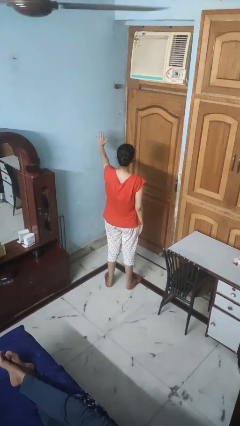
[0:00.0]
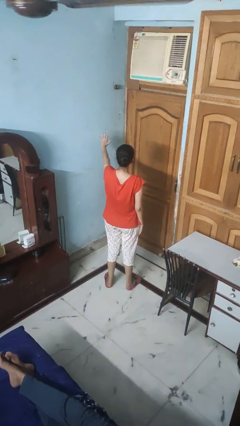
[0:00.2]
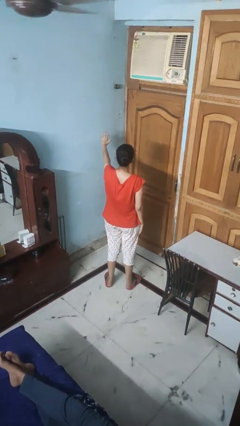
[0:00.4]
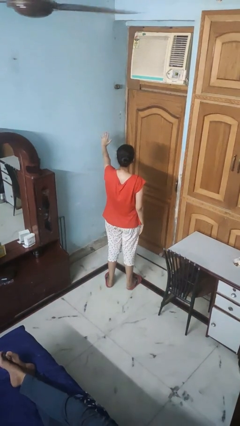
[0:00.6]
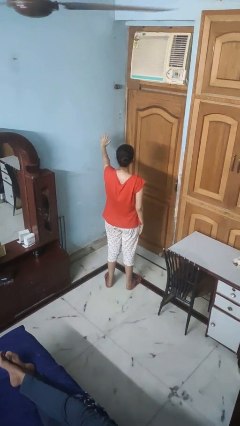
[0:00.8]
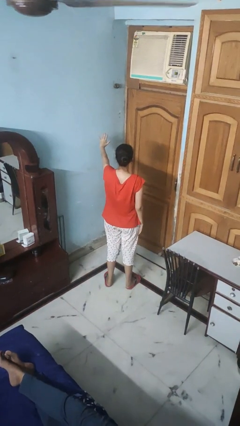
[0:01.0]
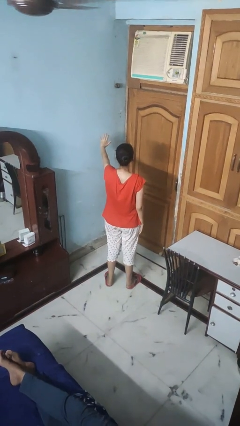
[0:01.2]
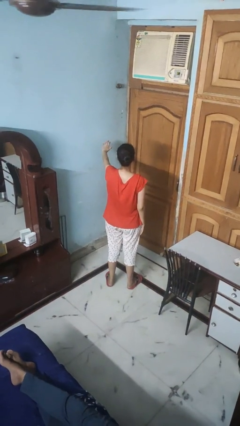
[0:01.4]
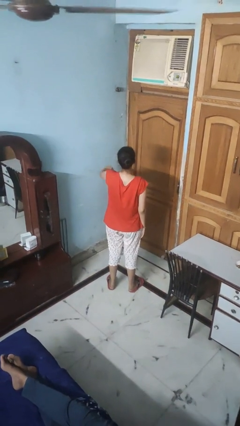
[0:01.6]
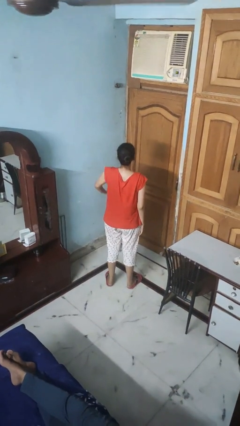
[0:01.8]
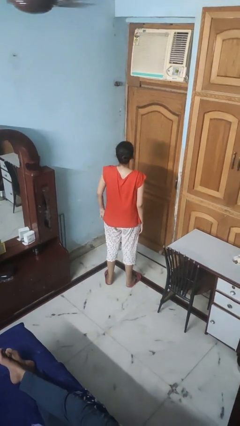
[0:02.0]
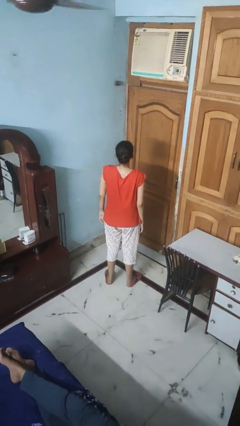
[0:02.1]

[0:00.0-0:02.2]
person gestures number five

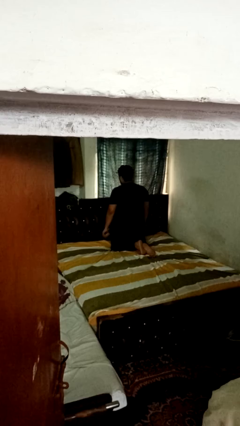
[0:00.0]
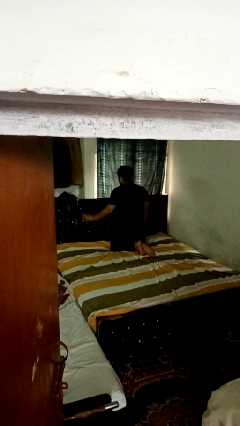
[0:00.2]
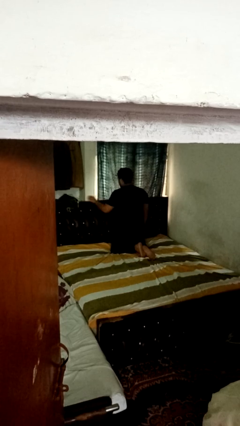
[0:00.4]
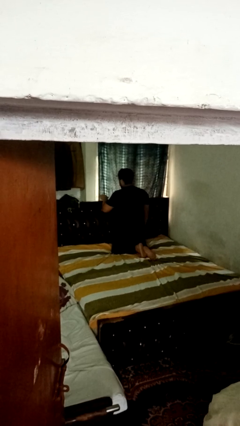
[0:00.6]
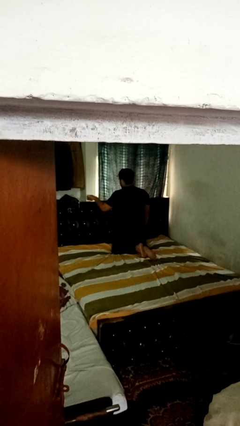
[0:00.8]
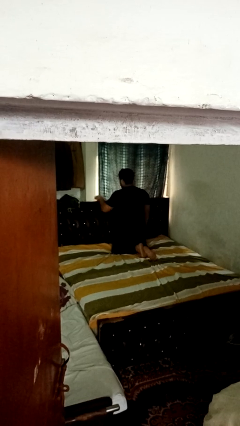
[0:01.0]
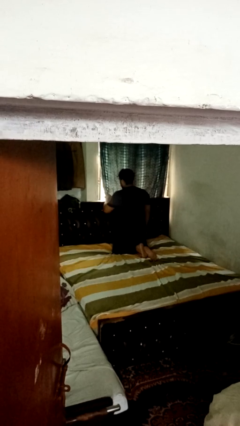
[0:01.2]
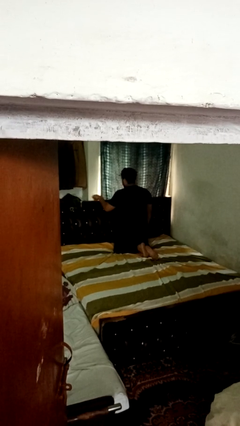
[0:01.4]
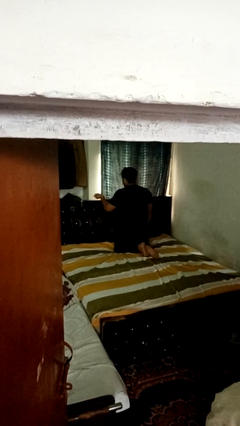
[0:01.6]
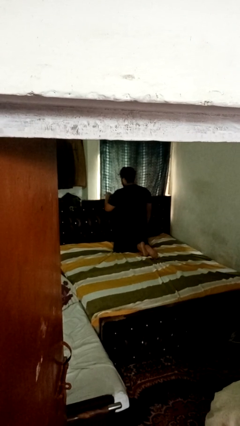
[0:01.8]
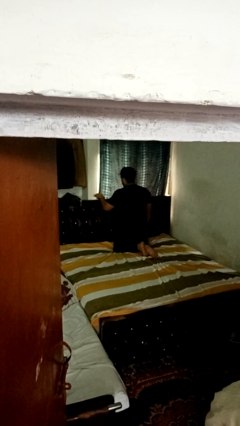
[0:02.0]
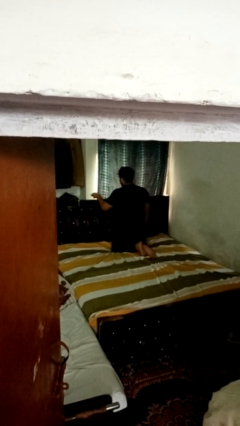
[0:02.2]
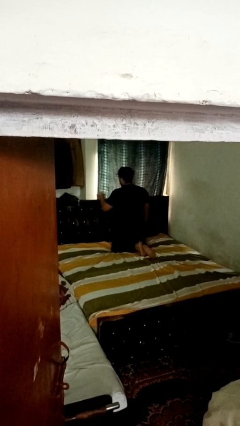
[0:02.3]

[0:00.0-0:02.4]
person dusts furniture

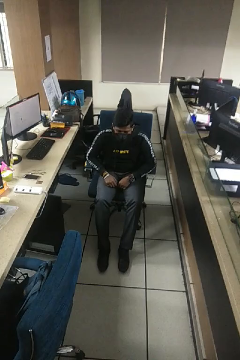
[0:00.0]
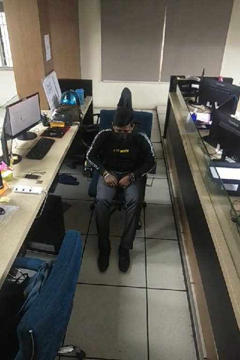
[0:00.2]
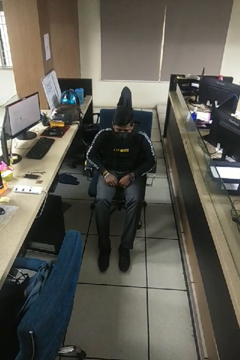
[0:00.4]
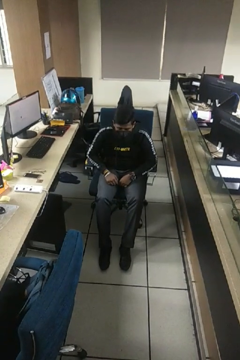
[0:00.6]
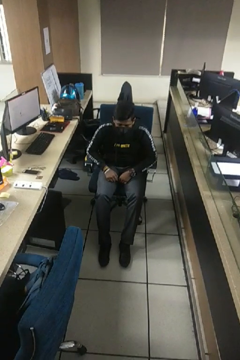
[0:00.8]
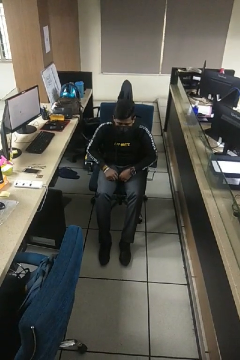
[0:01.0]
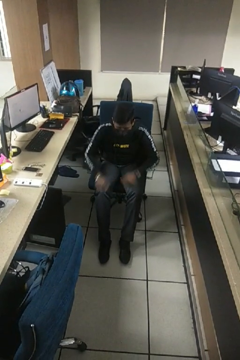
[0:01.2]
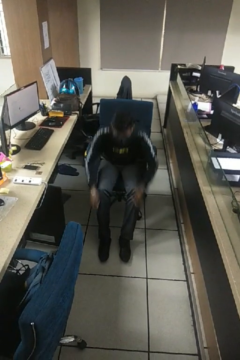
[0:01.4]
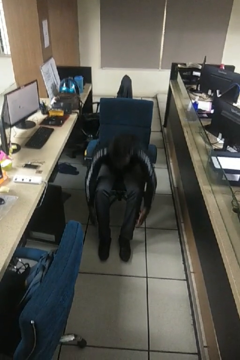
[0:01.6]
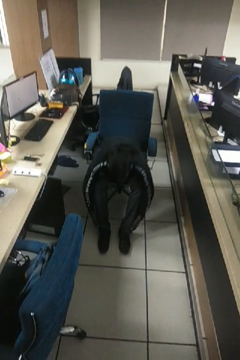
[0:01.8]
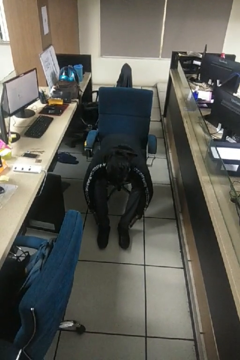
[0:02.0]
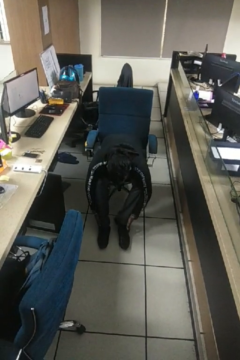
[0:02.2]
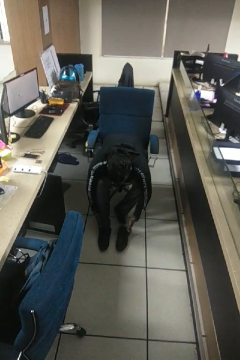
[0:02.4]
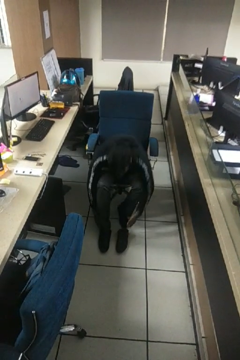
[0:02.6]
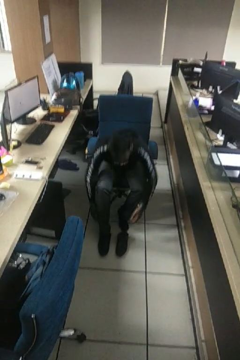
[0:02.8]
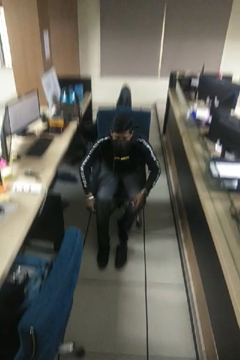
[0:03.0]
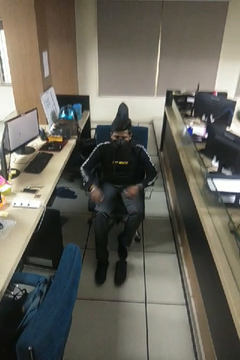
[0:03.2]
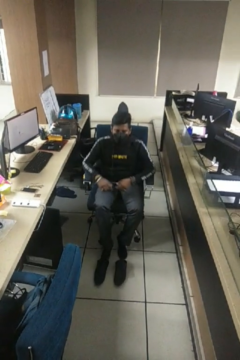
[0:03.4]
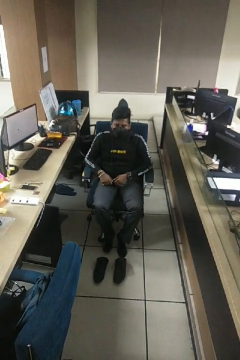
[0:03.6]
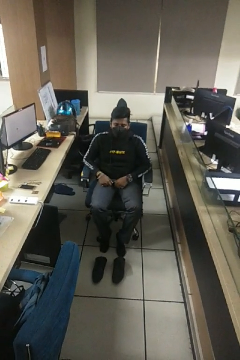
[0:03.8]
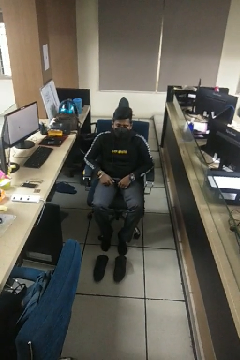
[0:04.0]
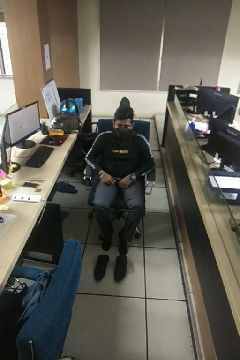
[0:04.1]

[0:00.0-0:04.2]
person takes off shoes

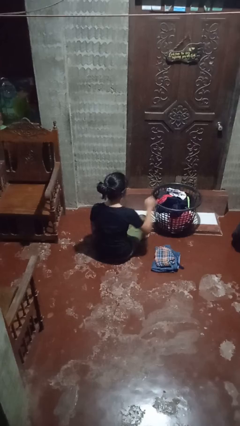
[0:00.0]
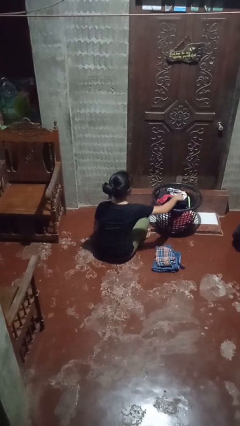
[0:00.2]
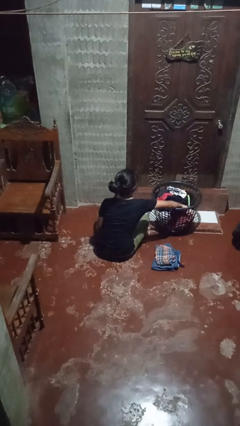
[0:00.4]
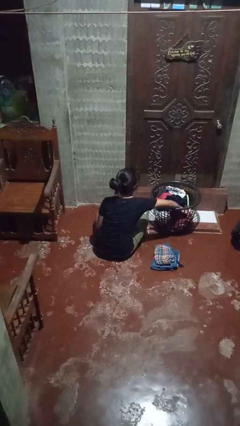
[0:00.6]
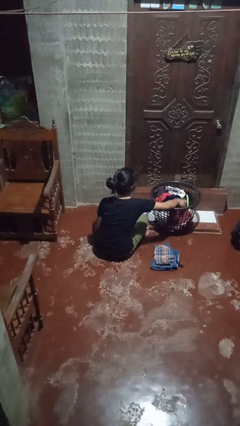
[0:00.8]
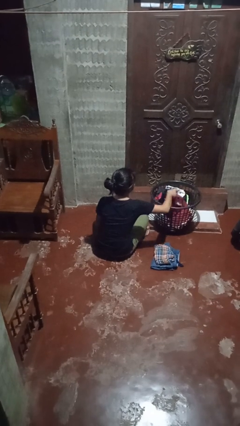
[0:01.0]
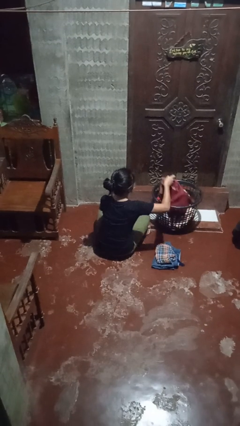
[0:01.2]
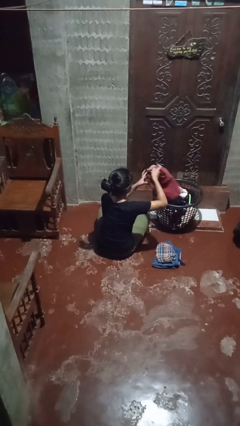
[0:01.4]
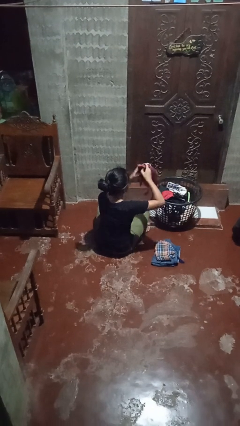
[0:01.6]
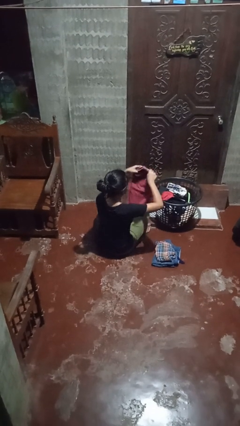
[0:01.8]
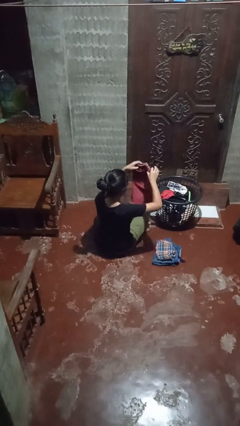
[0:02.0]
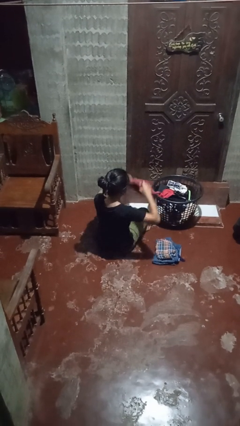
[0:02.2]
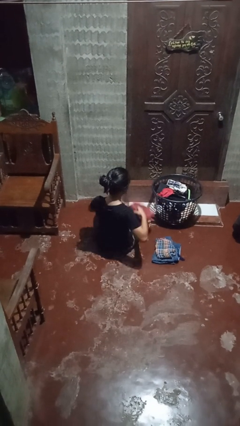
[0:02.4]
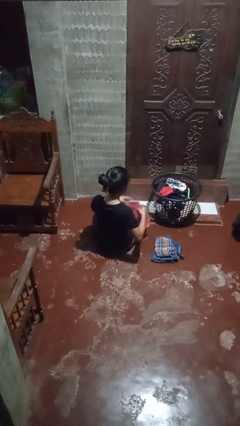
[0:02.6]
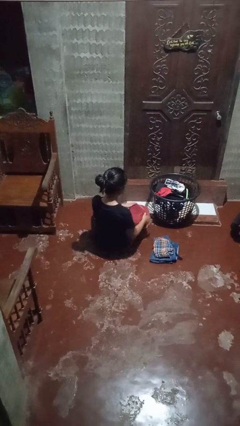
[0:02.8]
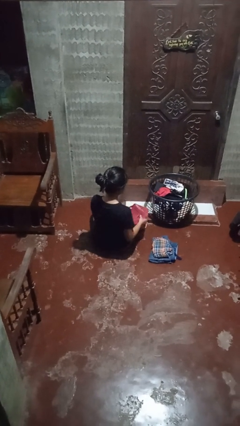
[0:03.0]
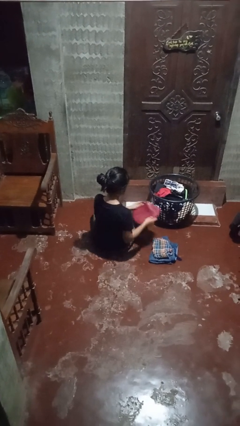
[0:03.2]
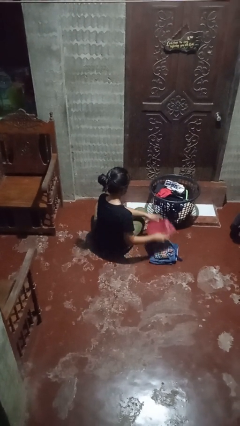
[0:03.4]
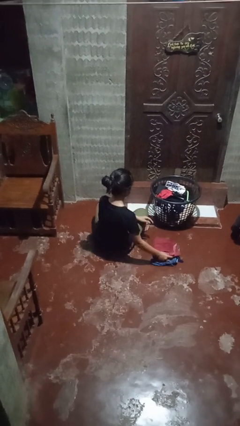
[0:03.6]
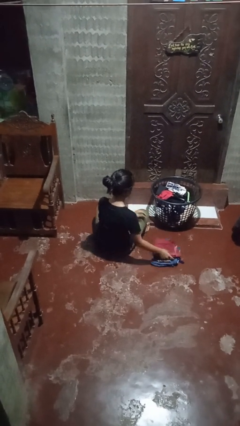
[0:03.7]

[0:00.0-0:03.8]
person folds pants

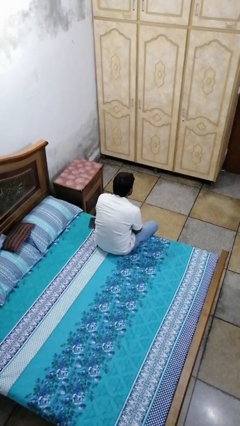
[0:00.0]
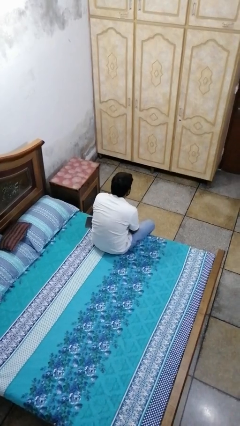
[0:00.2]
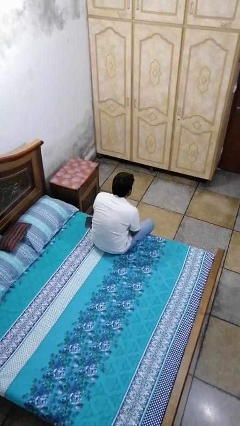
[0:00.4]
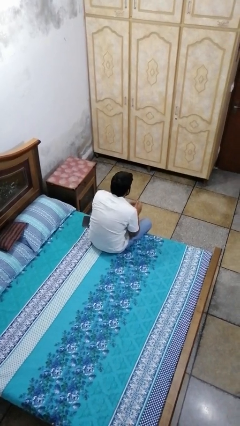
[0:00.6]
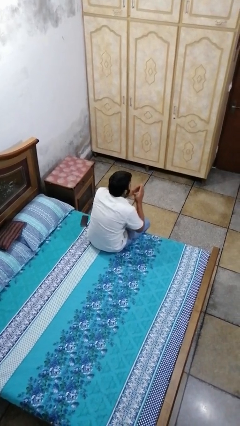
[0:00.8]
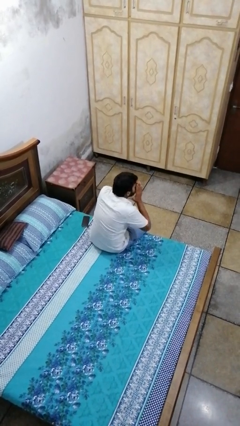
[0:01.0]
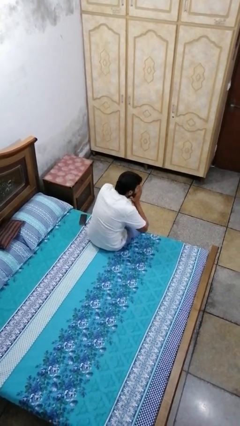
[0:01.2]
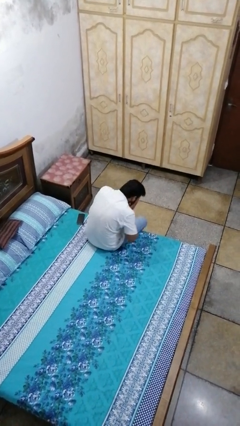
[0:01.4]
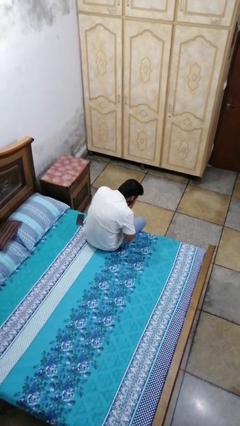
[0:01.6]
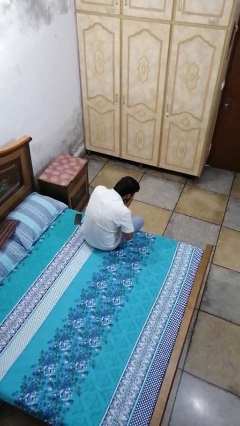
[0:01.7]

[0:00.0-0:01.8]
person sneezes into hand

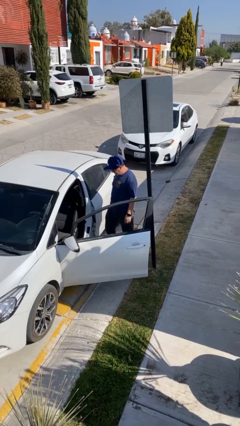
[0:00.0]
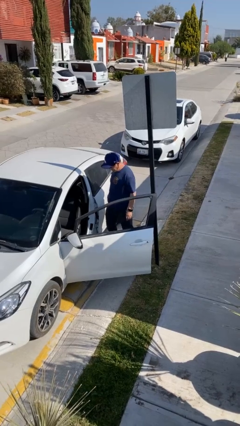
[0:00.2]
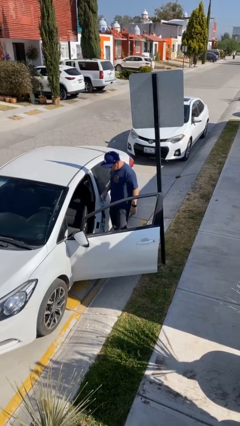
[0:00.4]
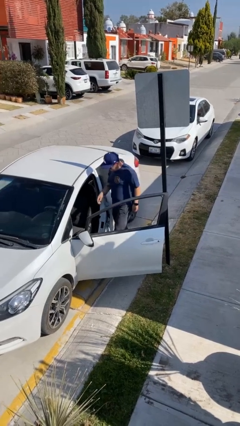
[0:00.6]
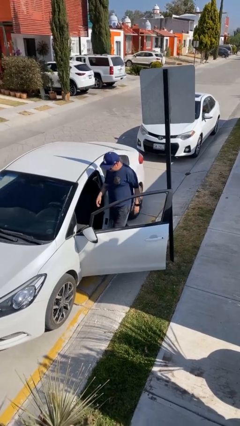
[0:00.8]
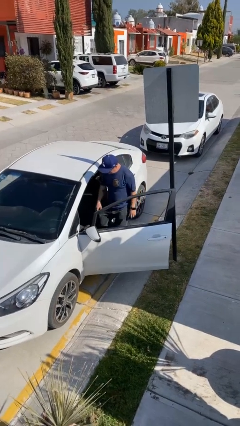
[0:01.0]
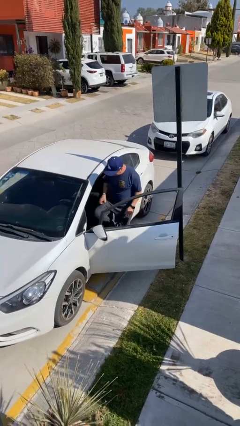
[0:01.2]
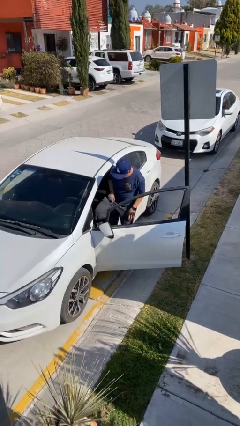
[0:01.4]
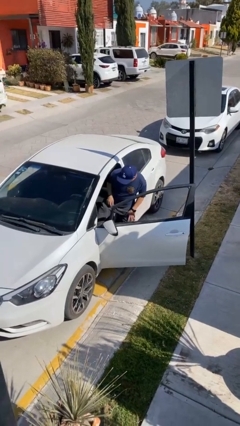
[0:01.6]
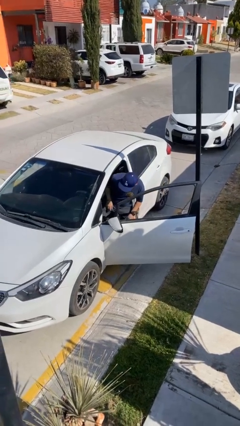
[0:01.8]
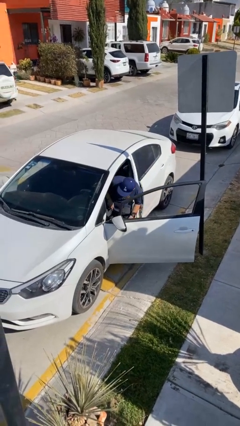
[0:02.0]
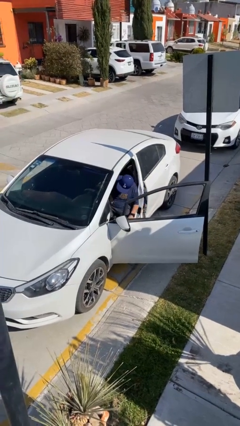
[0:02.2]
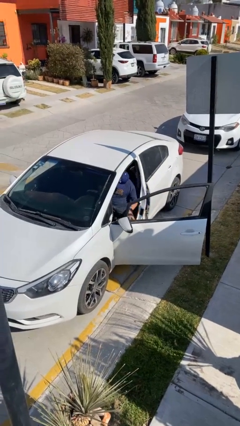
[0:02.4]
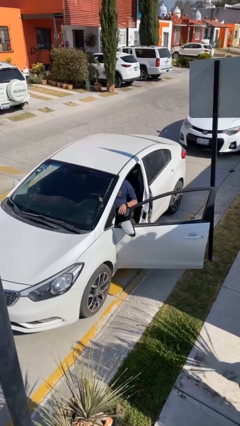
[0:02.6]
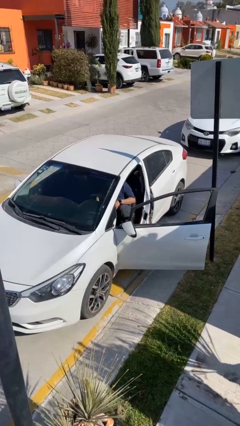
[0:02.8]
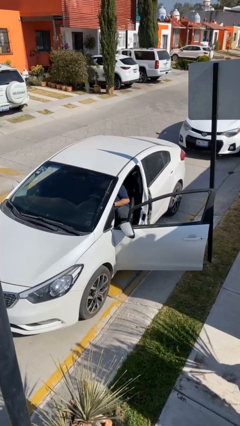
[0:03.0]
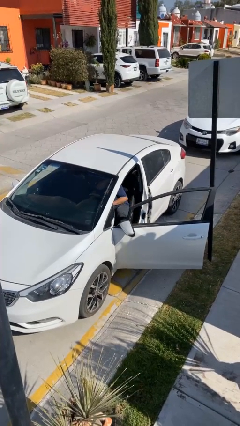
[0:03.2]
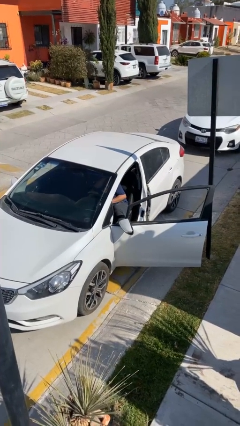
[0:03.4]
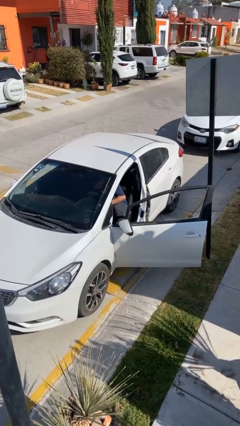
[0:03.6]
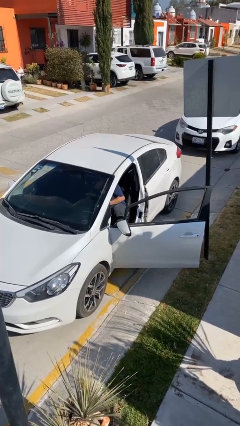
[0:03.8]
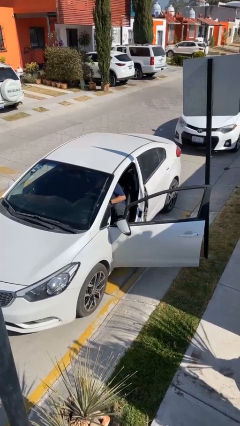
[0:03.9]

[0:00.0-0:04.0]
person enters car
